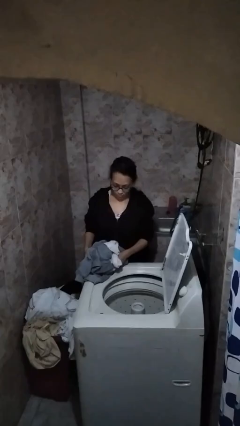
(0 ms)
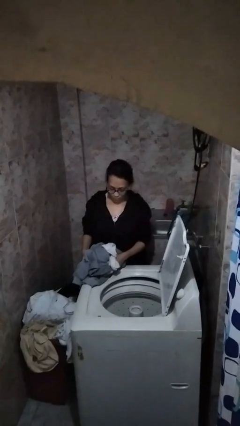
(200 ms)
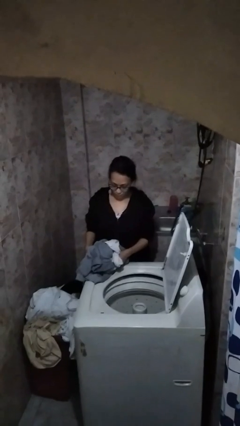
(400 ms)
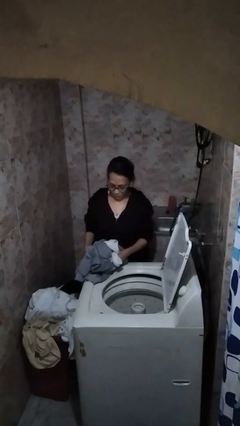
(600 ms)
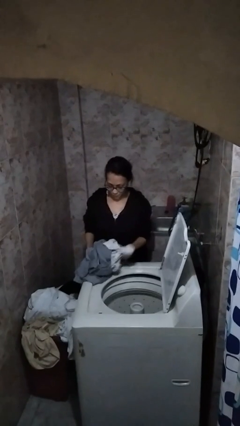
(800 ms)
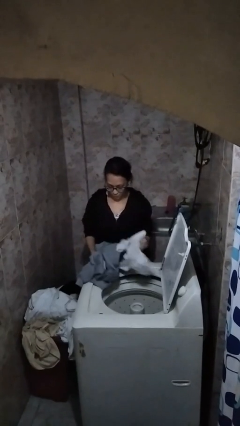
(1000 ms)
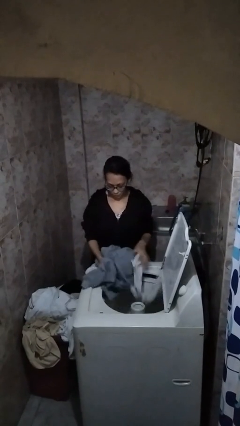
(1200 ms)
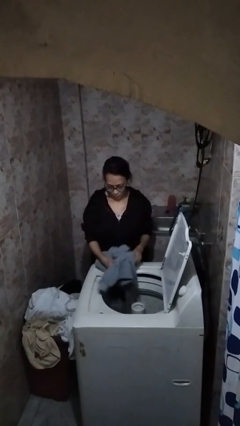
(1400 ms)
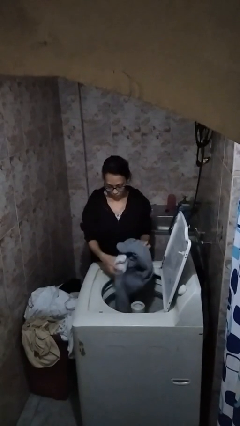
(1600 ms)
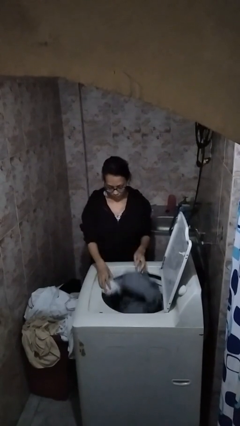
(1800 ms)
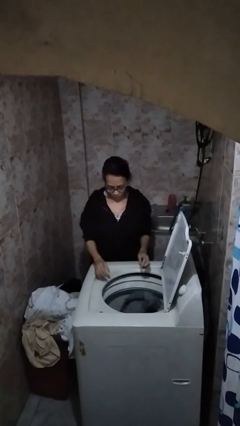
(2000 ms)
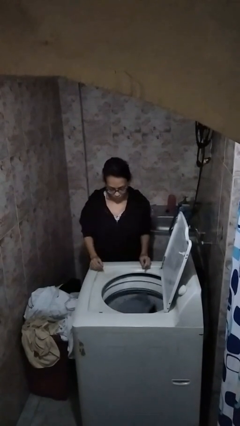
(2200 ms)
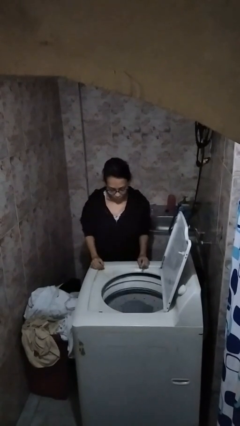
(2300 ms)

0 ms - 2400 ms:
person loads dryer

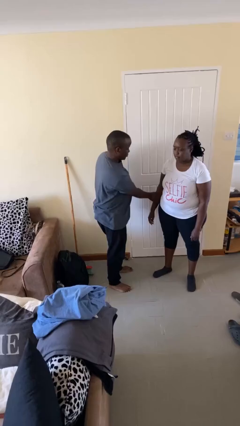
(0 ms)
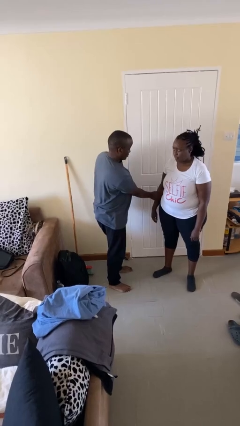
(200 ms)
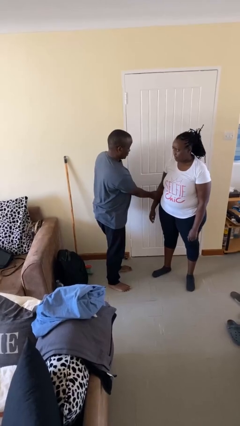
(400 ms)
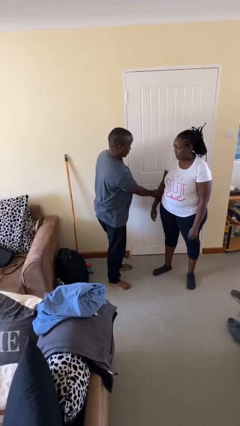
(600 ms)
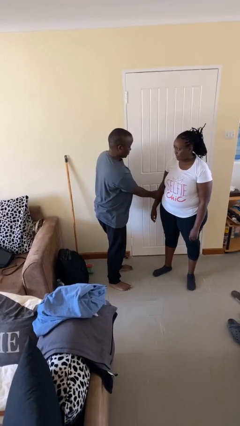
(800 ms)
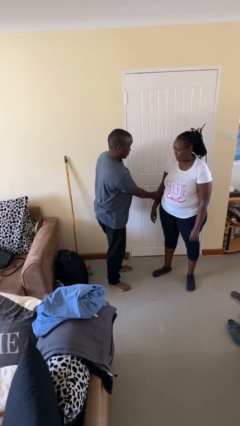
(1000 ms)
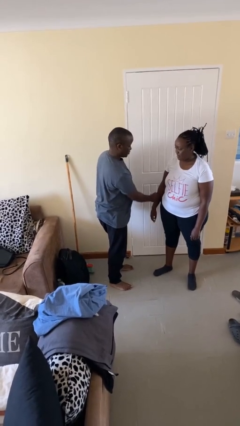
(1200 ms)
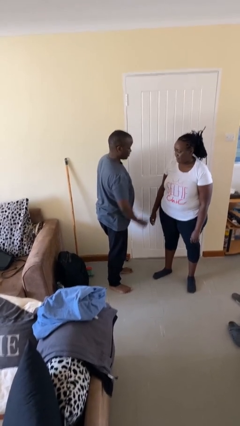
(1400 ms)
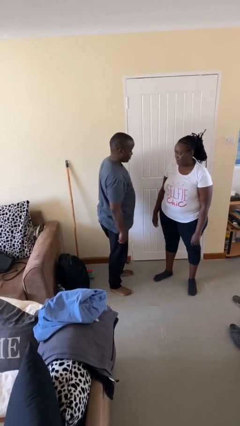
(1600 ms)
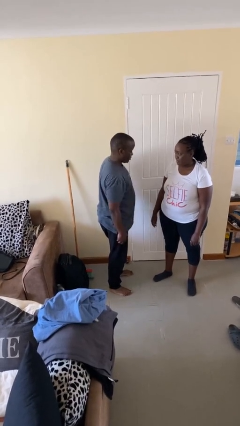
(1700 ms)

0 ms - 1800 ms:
person grabs person by forearm

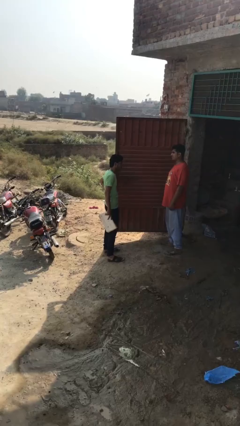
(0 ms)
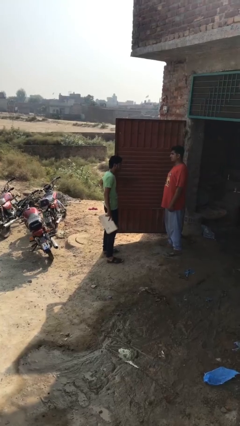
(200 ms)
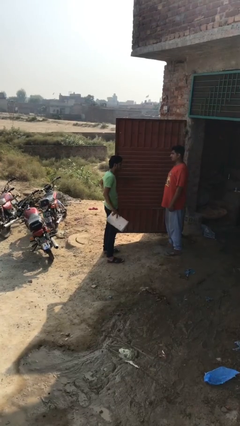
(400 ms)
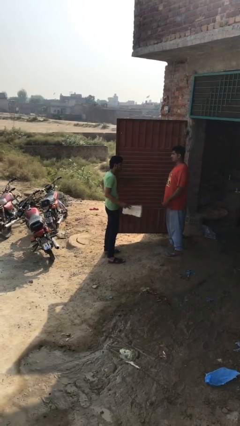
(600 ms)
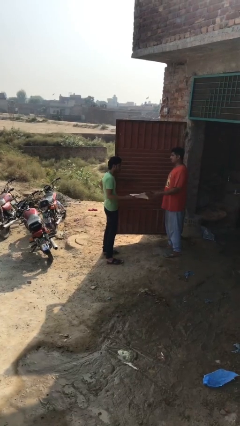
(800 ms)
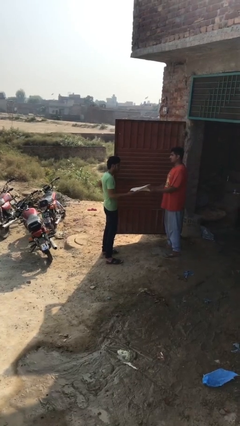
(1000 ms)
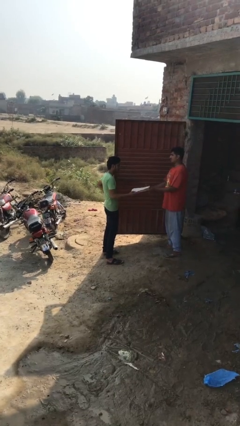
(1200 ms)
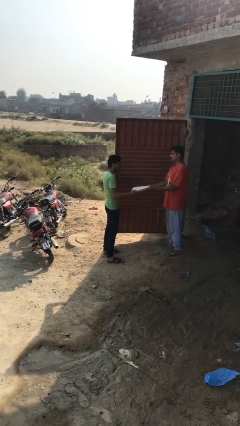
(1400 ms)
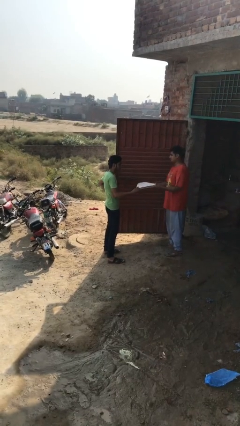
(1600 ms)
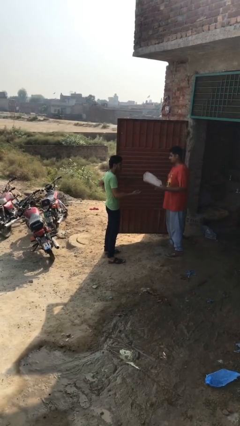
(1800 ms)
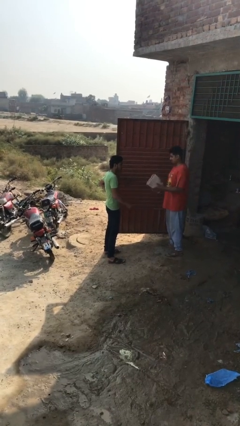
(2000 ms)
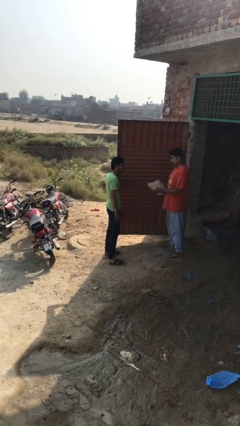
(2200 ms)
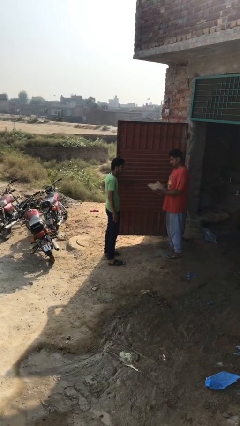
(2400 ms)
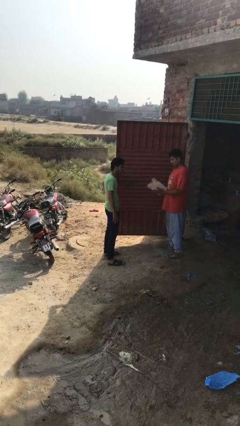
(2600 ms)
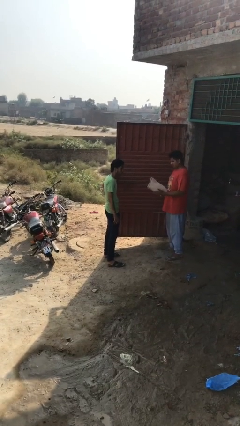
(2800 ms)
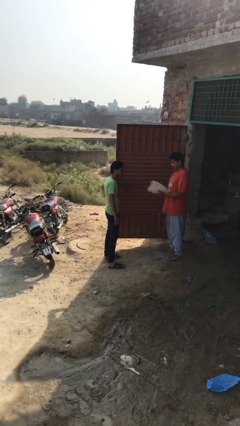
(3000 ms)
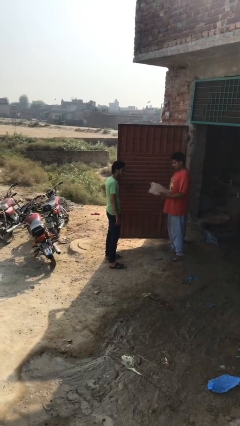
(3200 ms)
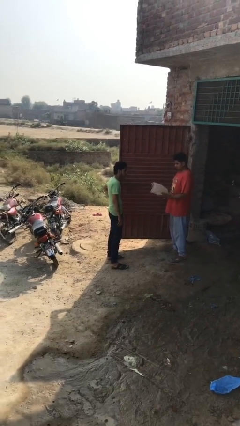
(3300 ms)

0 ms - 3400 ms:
person transfers object to person

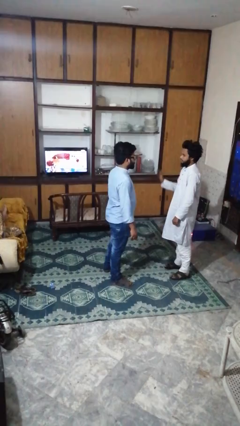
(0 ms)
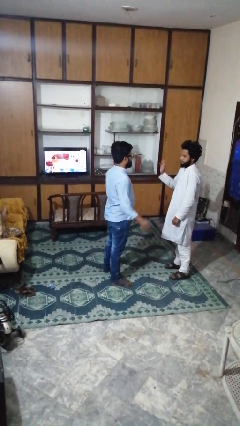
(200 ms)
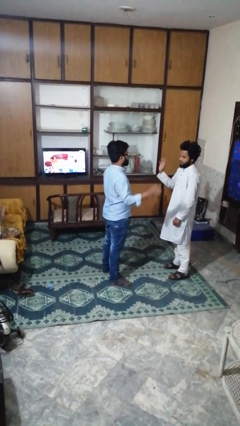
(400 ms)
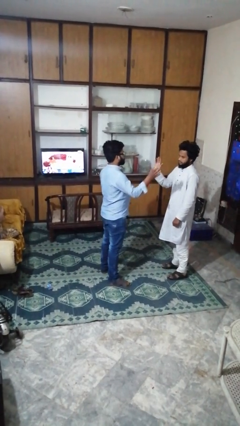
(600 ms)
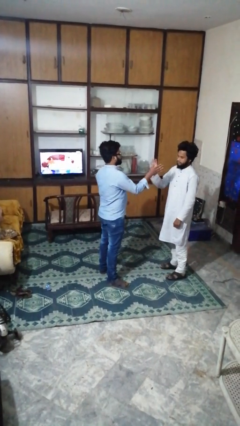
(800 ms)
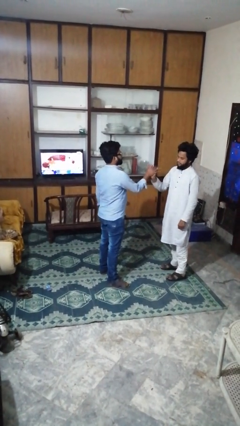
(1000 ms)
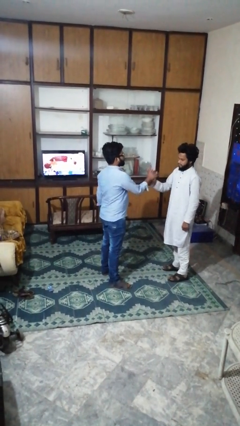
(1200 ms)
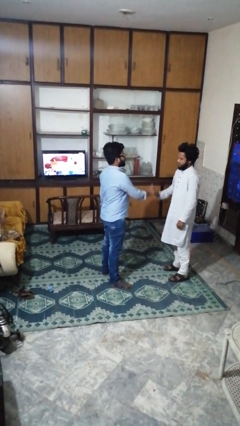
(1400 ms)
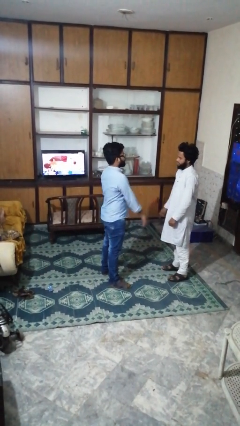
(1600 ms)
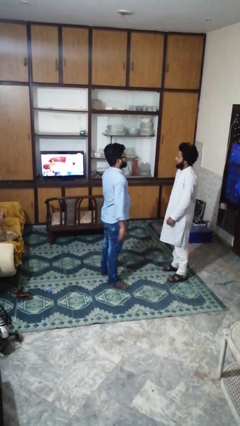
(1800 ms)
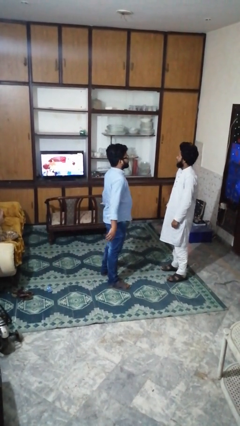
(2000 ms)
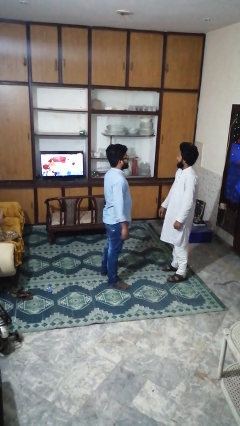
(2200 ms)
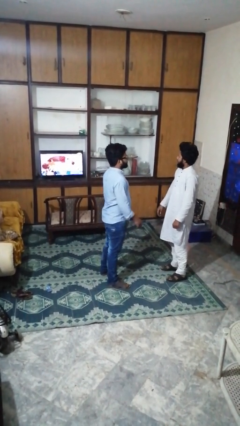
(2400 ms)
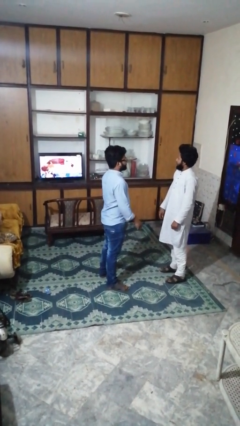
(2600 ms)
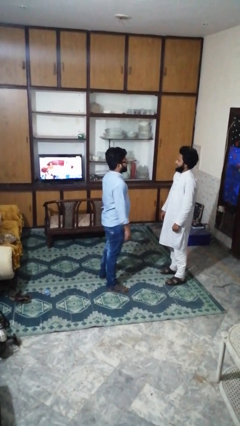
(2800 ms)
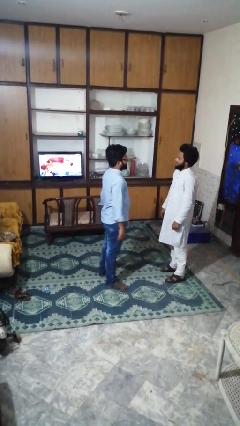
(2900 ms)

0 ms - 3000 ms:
person highfives hand

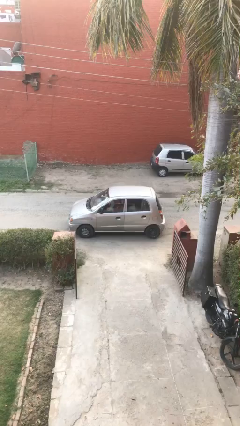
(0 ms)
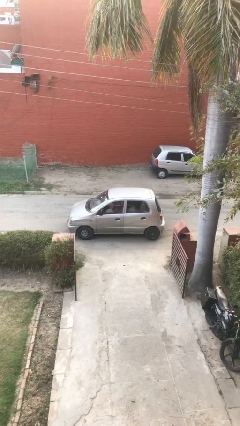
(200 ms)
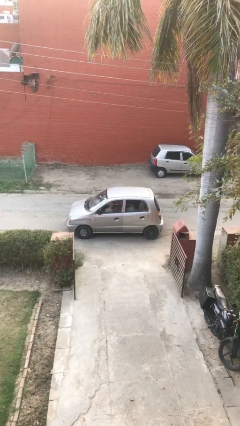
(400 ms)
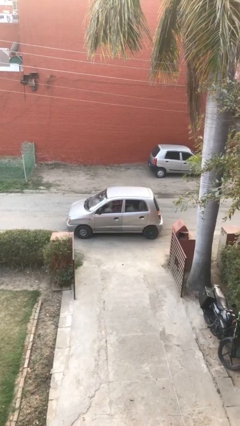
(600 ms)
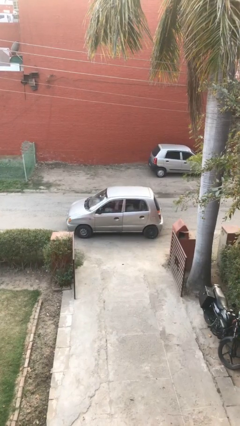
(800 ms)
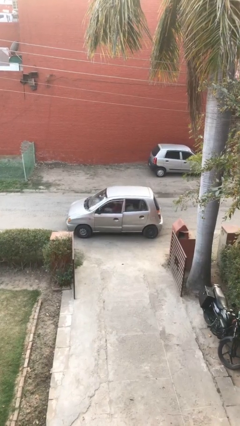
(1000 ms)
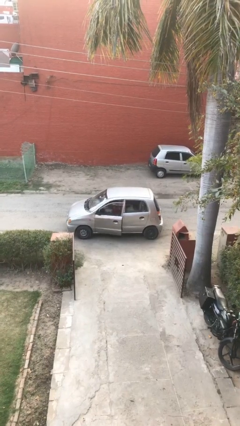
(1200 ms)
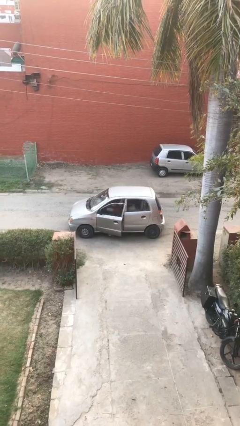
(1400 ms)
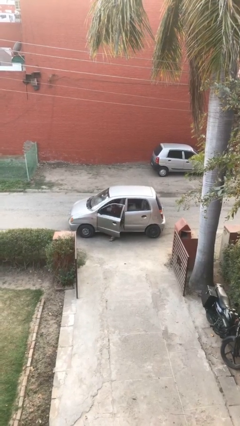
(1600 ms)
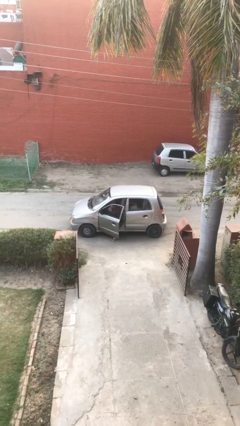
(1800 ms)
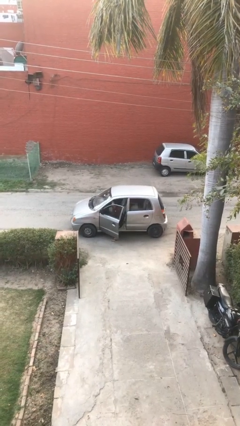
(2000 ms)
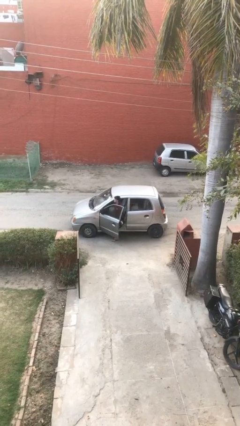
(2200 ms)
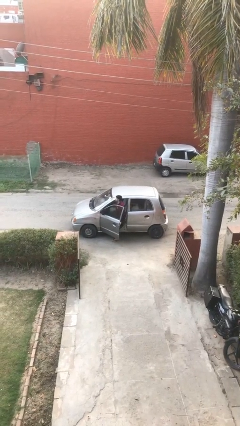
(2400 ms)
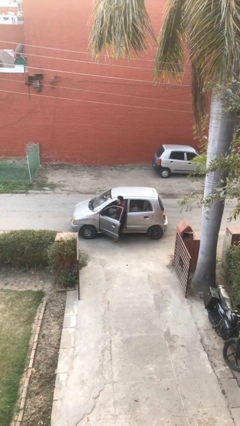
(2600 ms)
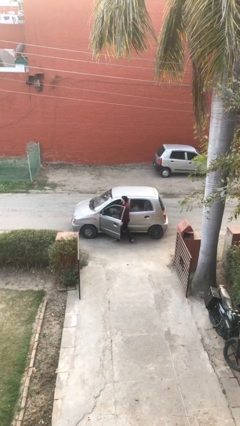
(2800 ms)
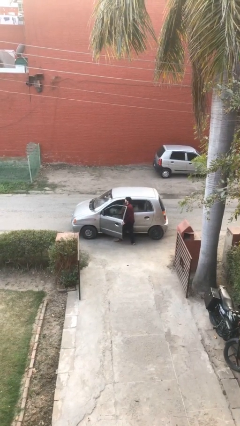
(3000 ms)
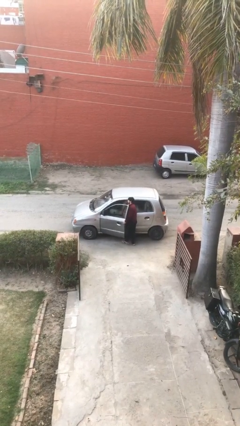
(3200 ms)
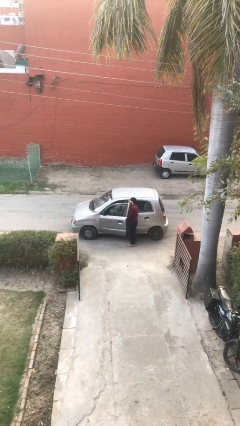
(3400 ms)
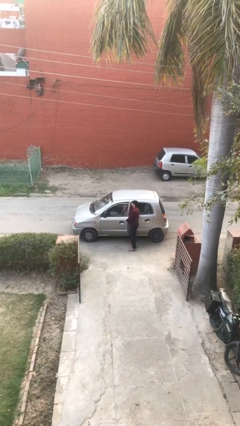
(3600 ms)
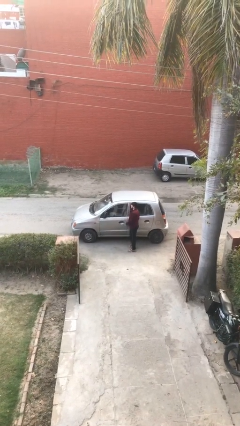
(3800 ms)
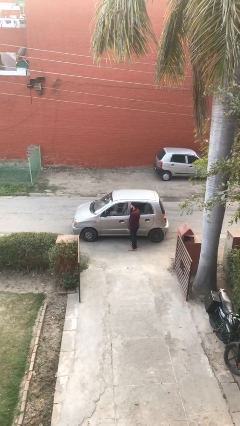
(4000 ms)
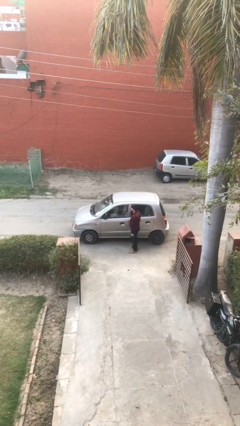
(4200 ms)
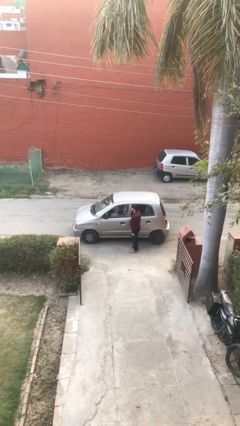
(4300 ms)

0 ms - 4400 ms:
car drops off person

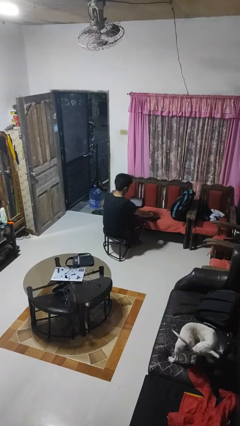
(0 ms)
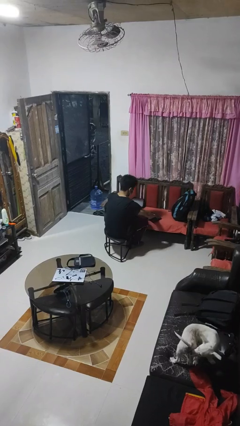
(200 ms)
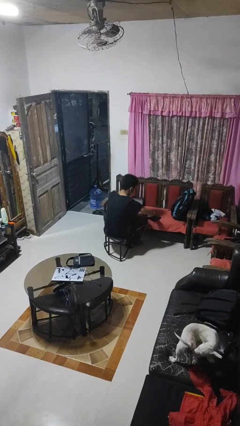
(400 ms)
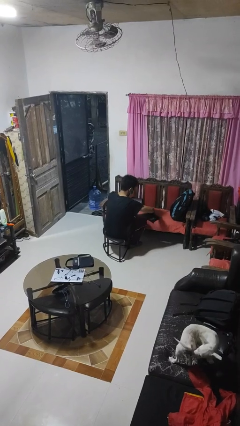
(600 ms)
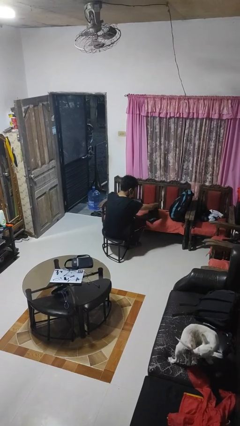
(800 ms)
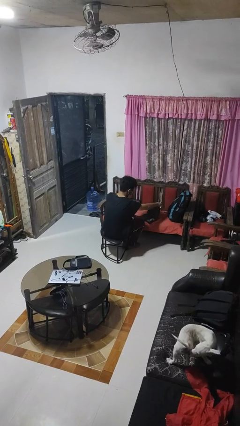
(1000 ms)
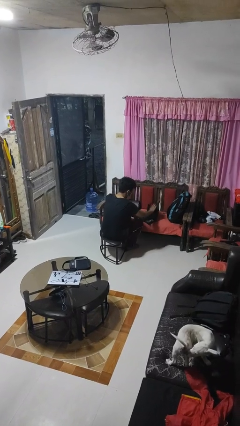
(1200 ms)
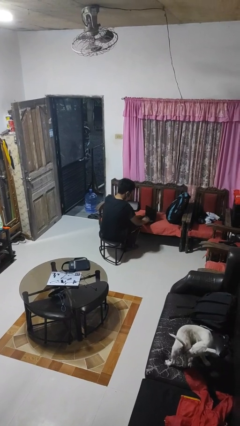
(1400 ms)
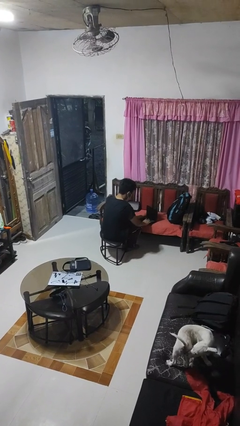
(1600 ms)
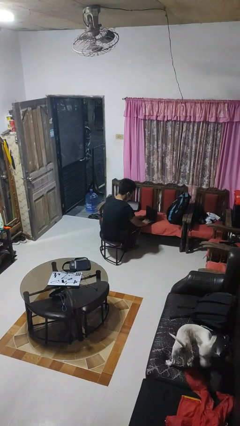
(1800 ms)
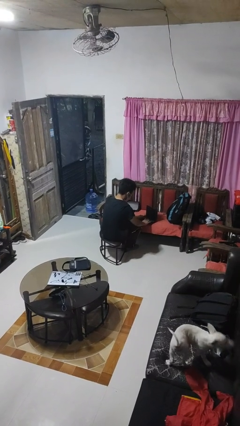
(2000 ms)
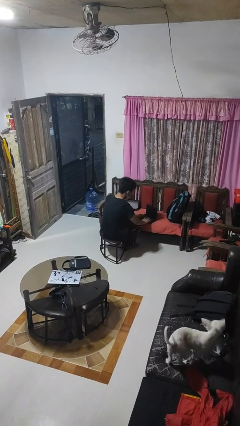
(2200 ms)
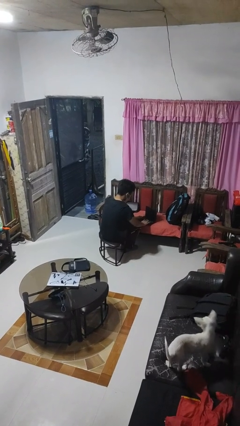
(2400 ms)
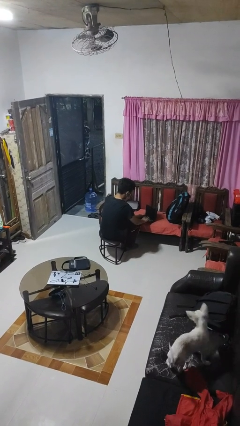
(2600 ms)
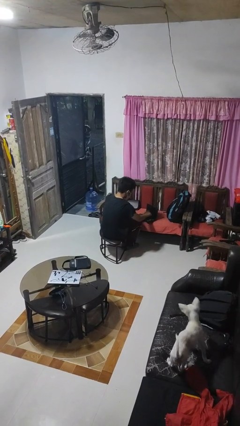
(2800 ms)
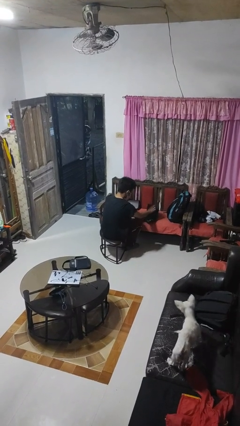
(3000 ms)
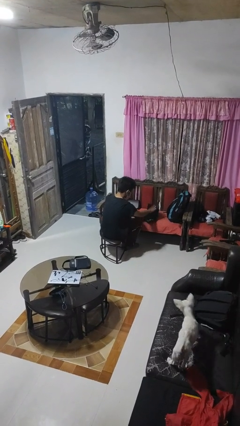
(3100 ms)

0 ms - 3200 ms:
person opens laptop
